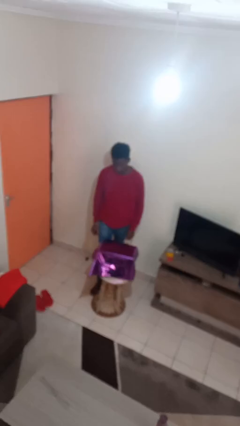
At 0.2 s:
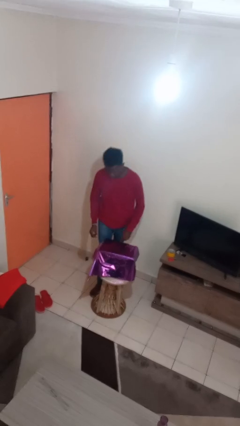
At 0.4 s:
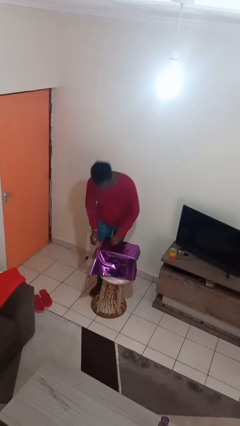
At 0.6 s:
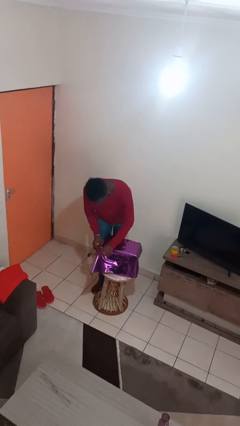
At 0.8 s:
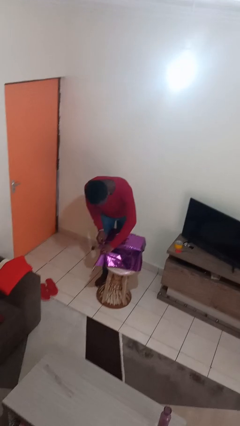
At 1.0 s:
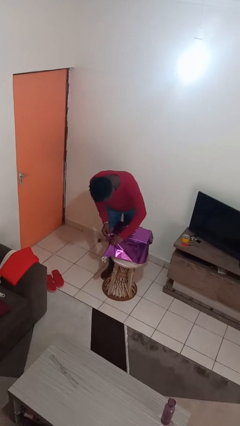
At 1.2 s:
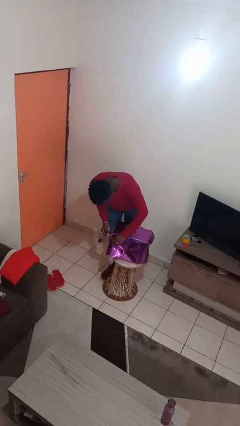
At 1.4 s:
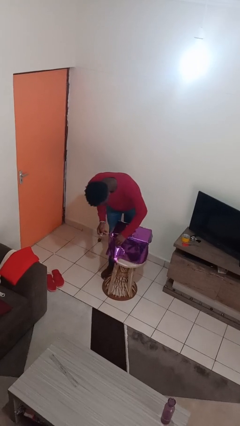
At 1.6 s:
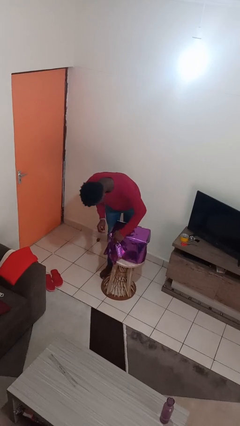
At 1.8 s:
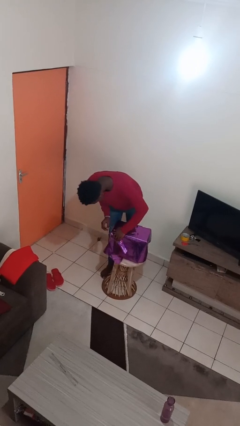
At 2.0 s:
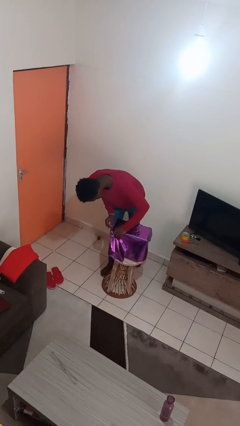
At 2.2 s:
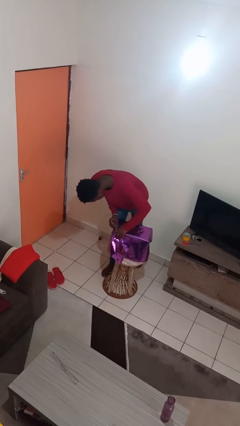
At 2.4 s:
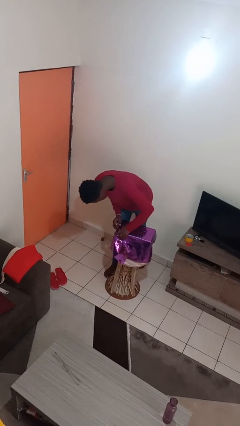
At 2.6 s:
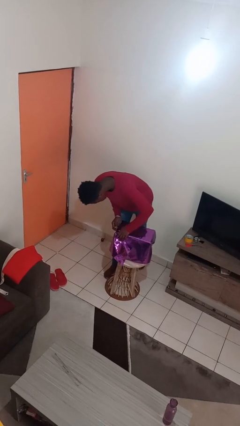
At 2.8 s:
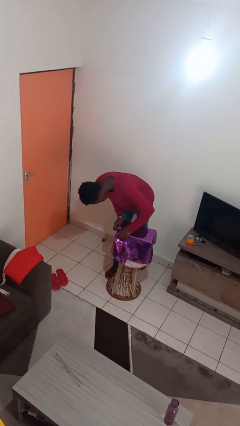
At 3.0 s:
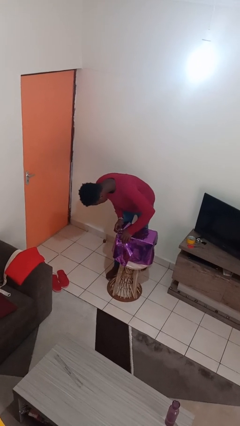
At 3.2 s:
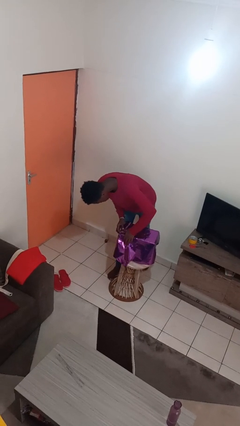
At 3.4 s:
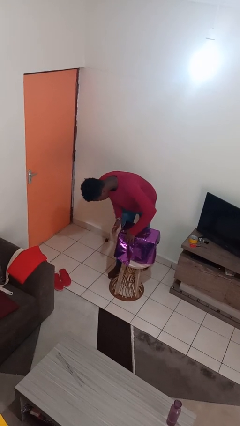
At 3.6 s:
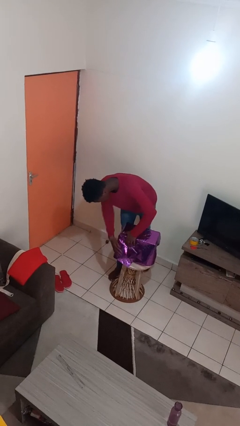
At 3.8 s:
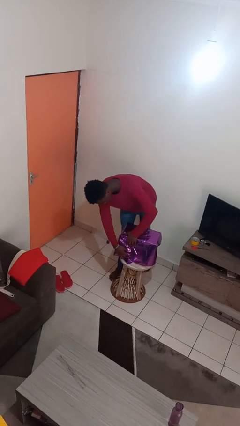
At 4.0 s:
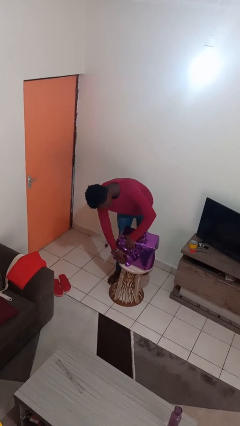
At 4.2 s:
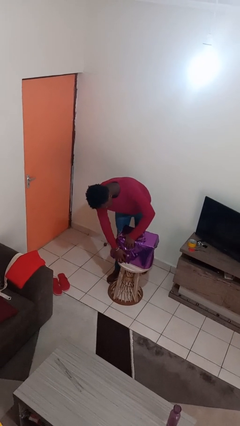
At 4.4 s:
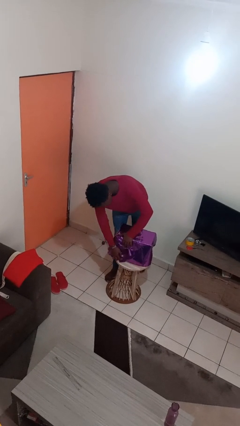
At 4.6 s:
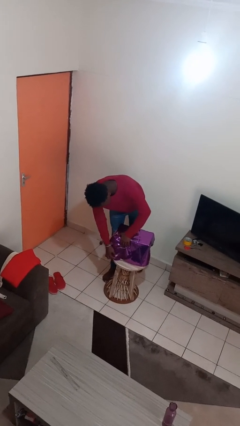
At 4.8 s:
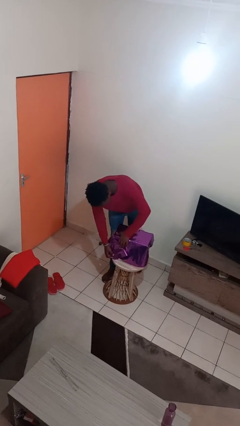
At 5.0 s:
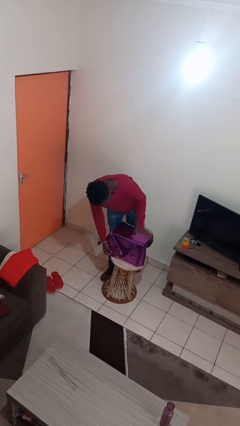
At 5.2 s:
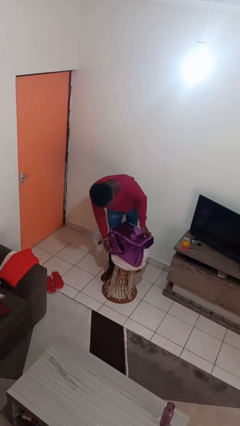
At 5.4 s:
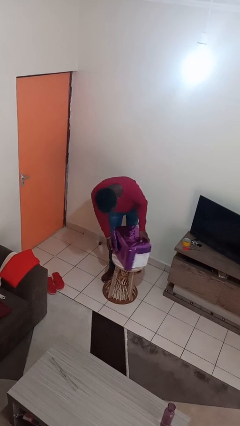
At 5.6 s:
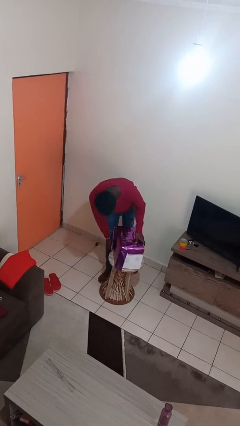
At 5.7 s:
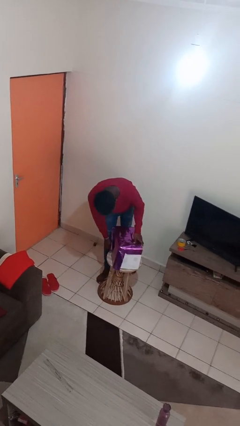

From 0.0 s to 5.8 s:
person wraps box

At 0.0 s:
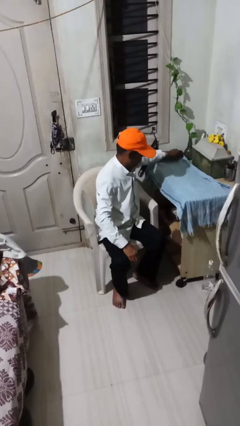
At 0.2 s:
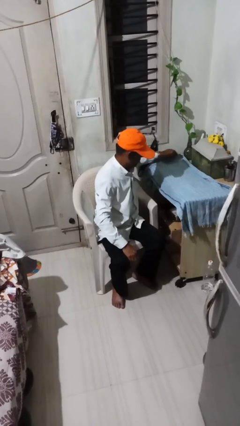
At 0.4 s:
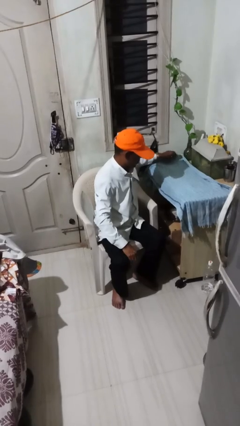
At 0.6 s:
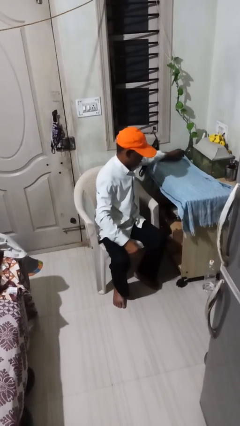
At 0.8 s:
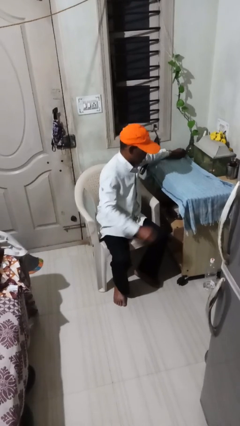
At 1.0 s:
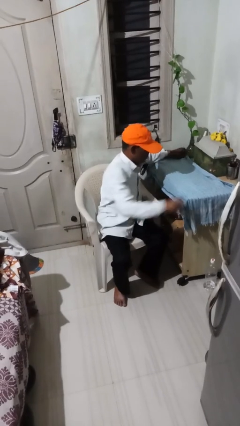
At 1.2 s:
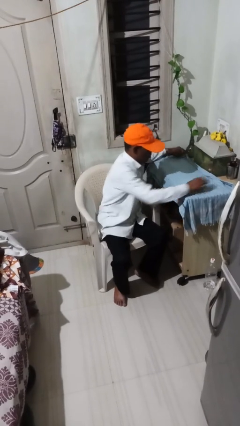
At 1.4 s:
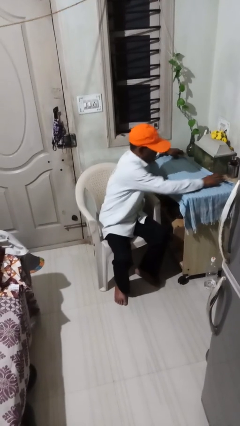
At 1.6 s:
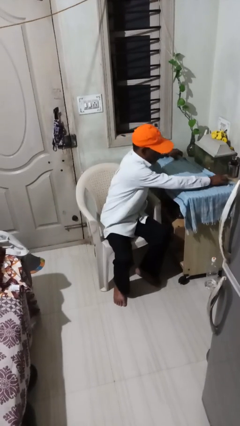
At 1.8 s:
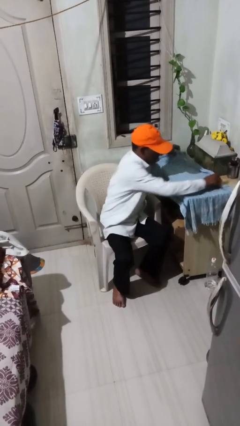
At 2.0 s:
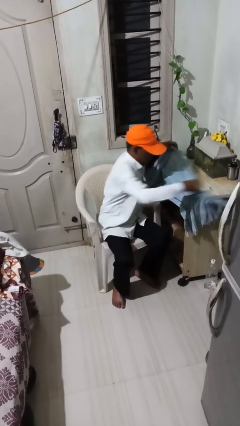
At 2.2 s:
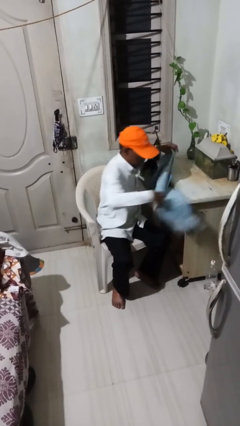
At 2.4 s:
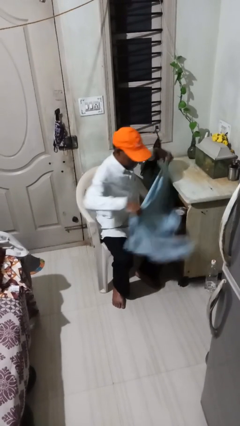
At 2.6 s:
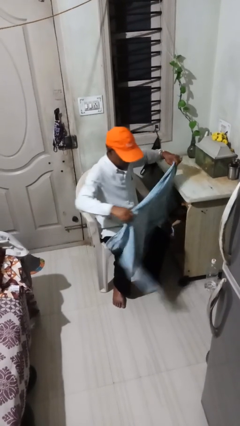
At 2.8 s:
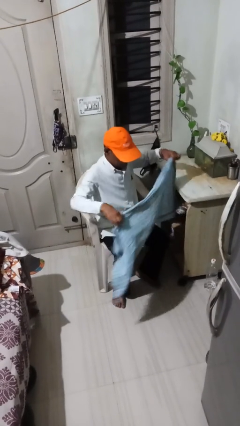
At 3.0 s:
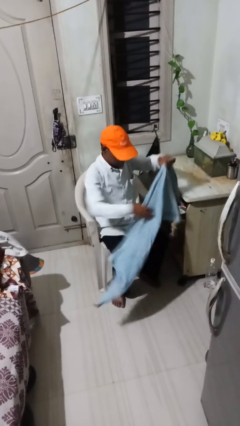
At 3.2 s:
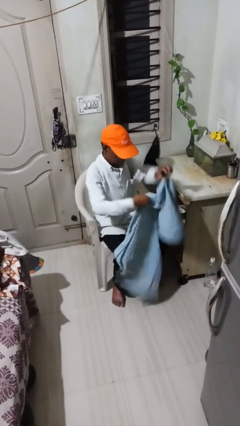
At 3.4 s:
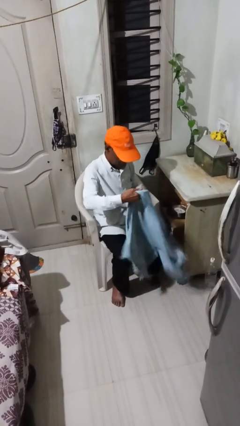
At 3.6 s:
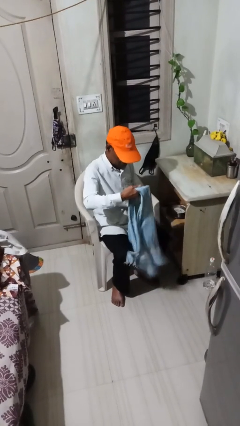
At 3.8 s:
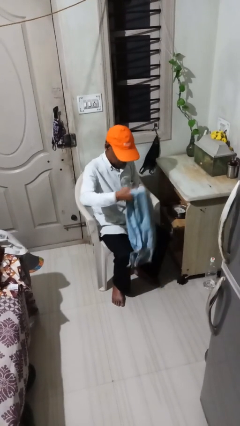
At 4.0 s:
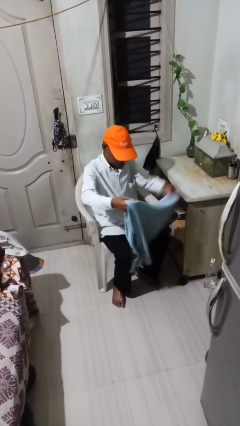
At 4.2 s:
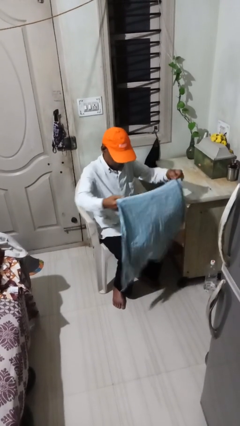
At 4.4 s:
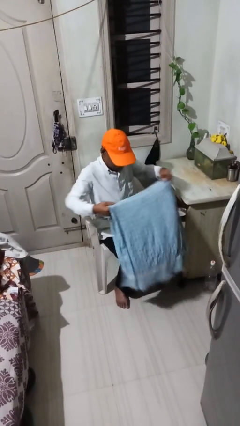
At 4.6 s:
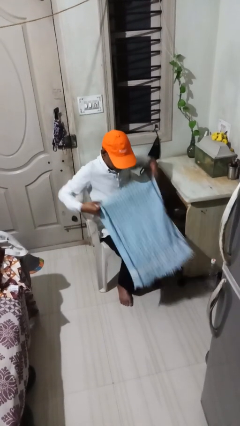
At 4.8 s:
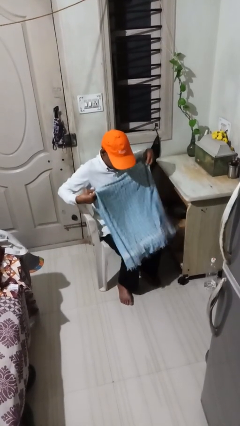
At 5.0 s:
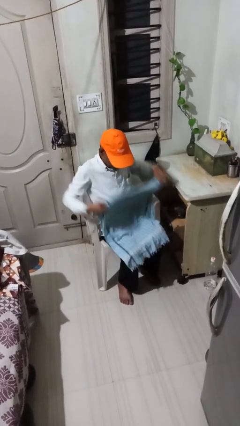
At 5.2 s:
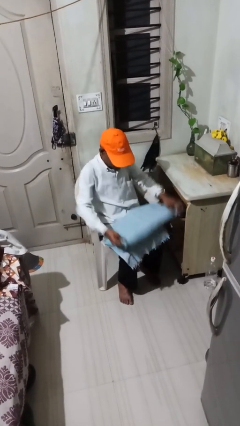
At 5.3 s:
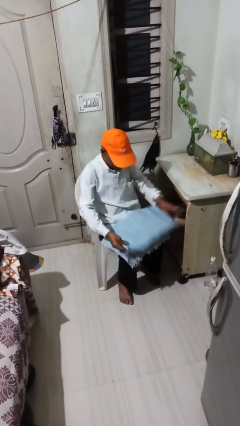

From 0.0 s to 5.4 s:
person folds tablecloth

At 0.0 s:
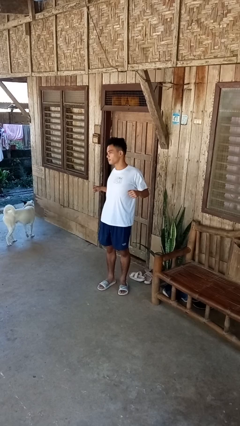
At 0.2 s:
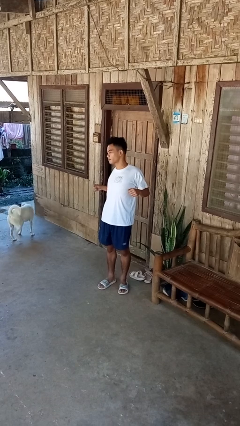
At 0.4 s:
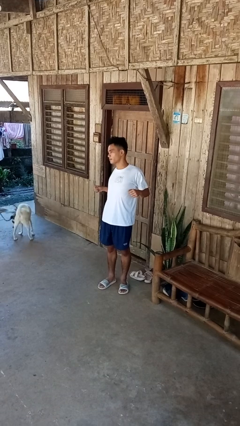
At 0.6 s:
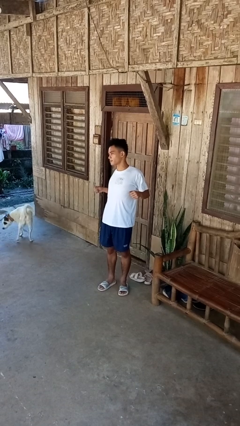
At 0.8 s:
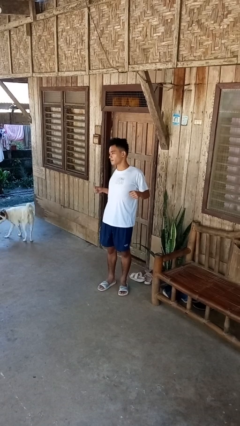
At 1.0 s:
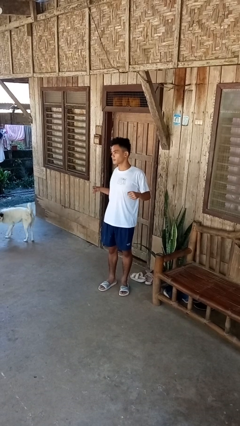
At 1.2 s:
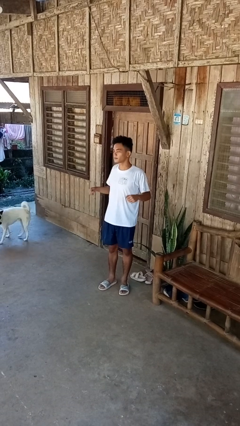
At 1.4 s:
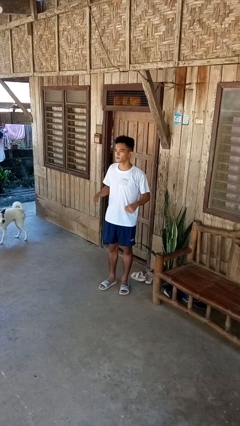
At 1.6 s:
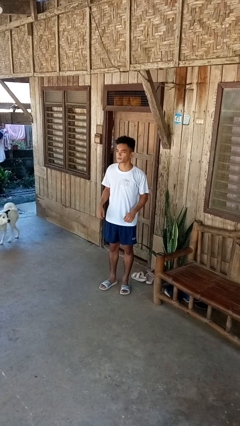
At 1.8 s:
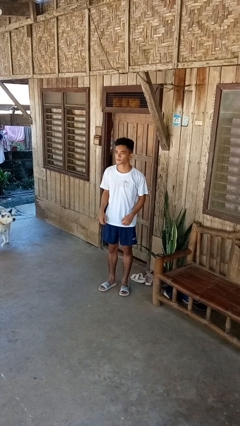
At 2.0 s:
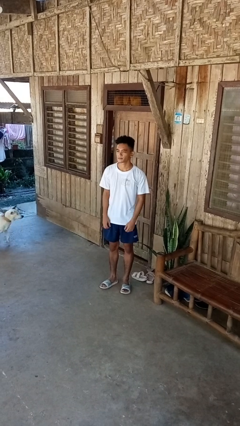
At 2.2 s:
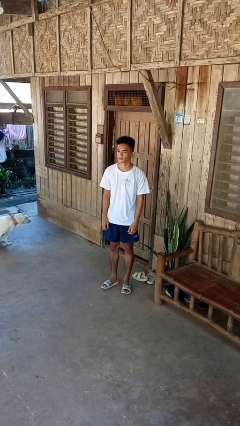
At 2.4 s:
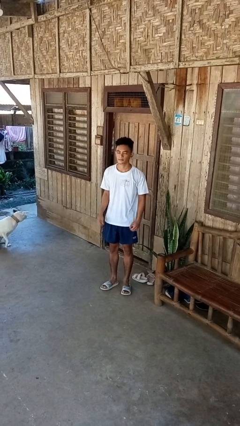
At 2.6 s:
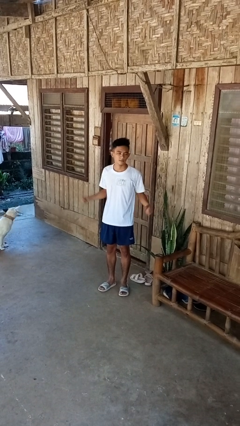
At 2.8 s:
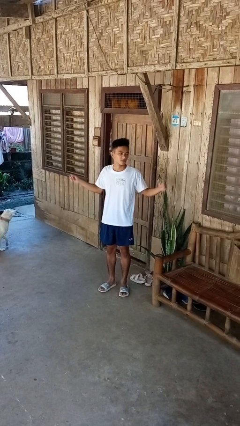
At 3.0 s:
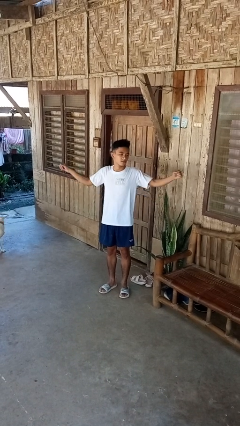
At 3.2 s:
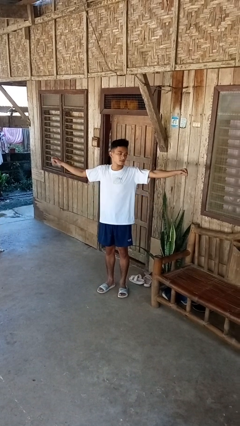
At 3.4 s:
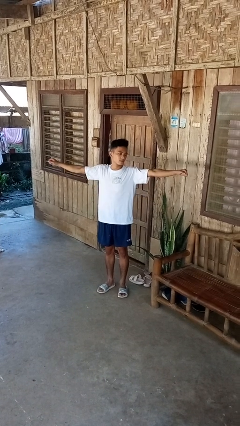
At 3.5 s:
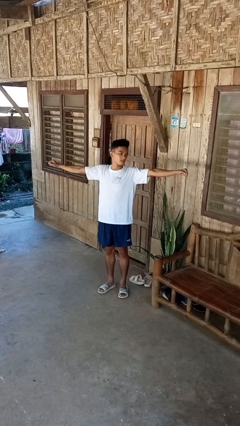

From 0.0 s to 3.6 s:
person stretches back

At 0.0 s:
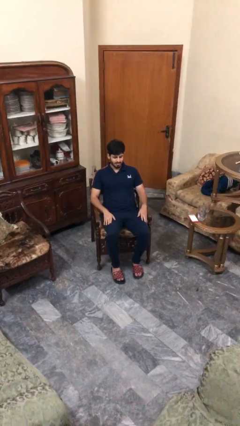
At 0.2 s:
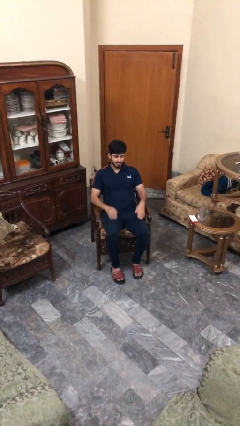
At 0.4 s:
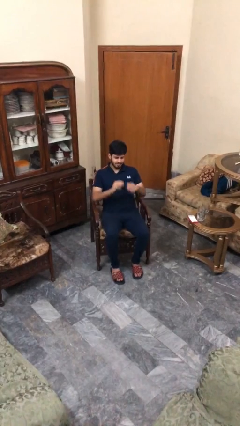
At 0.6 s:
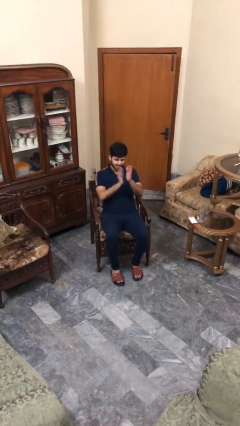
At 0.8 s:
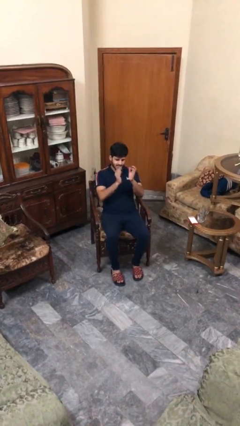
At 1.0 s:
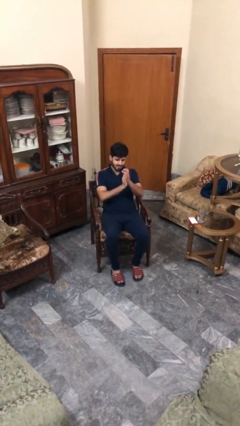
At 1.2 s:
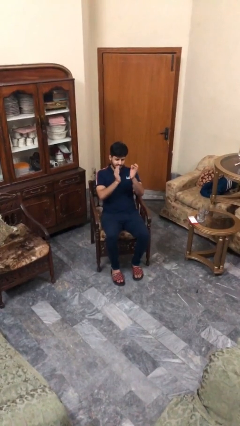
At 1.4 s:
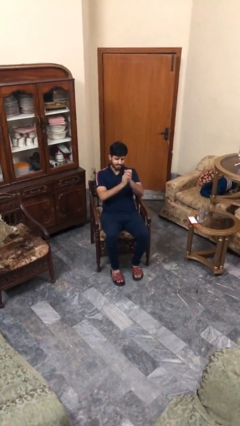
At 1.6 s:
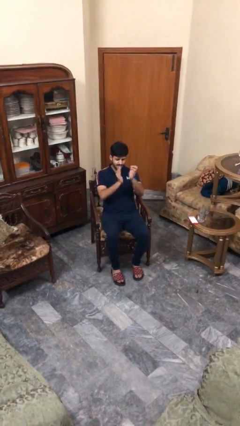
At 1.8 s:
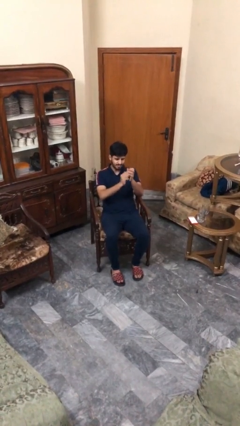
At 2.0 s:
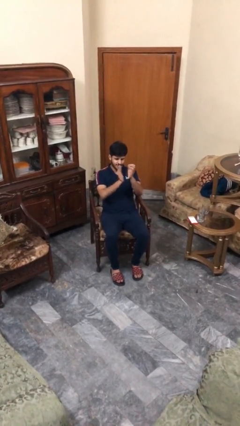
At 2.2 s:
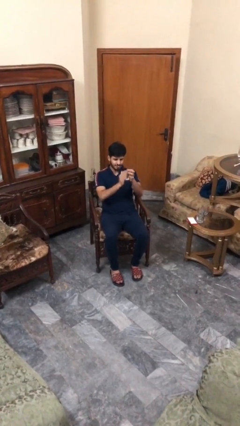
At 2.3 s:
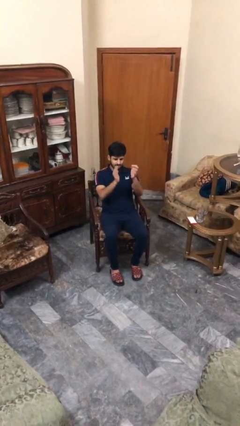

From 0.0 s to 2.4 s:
person claps hands

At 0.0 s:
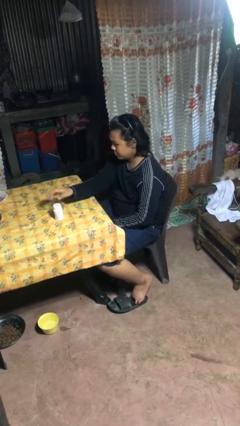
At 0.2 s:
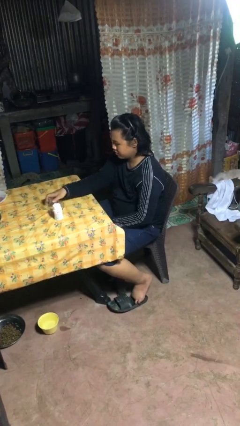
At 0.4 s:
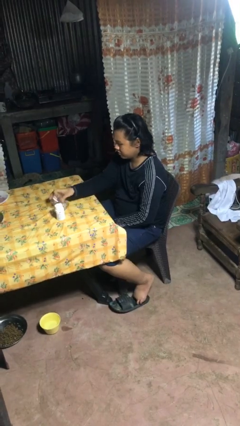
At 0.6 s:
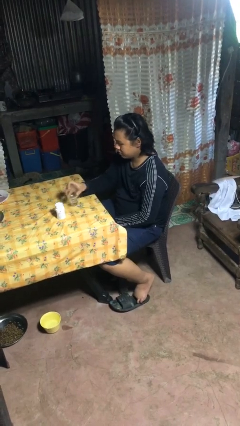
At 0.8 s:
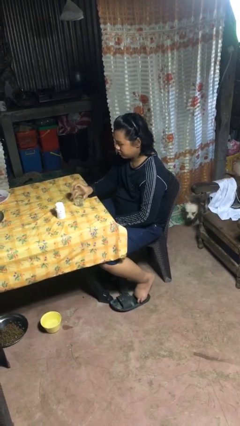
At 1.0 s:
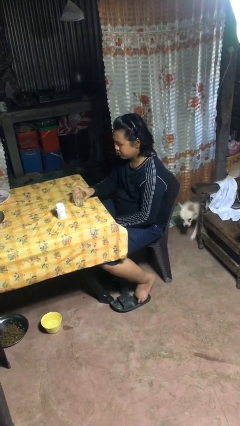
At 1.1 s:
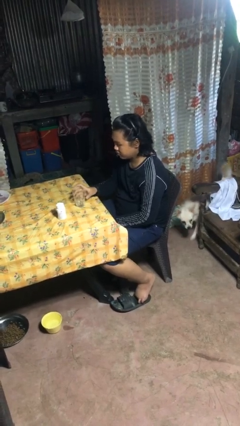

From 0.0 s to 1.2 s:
person sets upright glass
